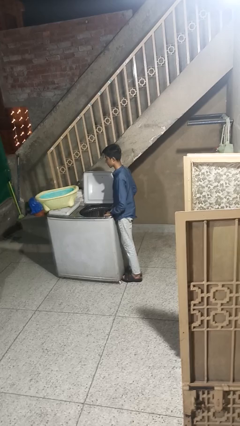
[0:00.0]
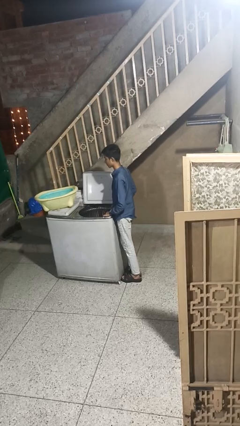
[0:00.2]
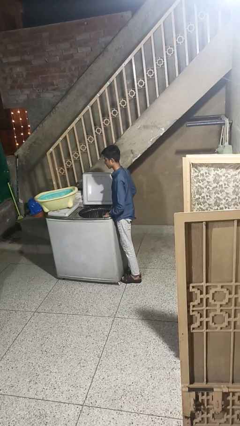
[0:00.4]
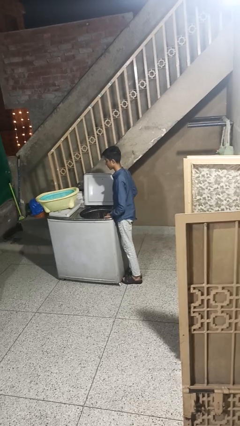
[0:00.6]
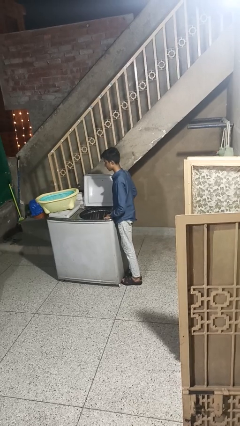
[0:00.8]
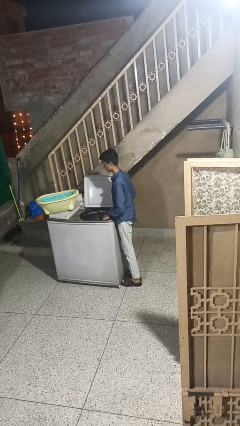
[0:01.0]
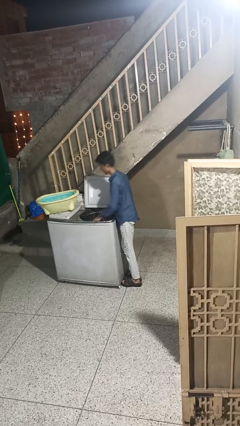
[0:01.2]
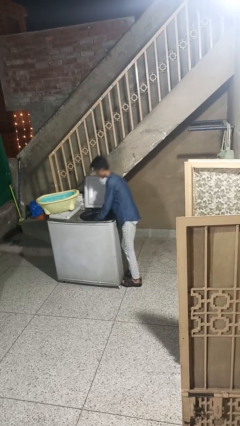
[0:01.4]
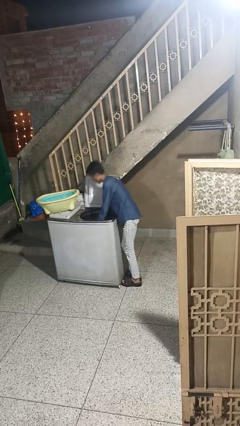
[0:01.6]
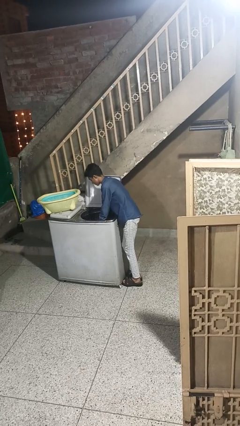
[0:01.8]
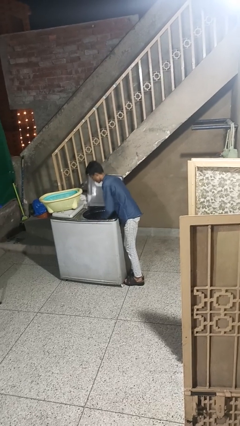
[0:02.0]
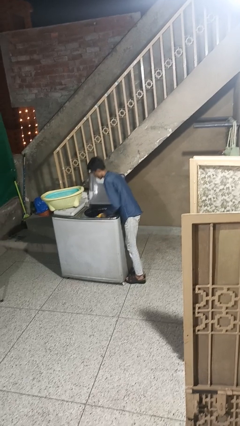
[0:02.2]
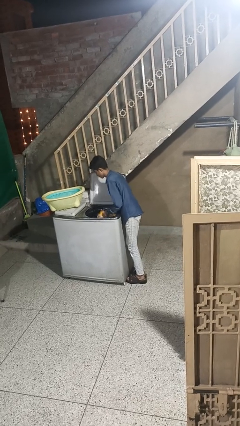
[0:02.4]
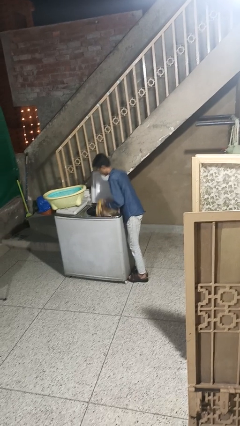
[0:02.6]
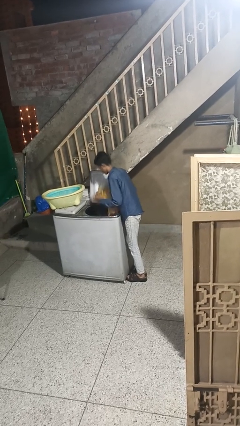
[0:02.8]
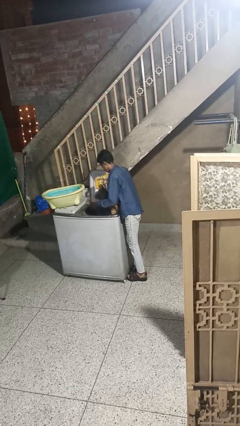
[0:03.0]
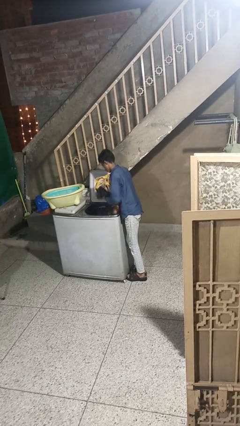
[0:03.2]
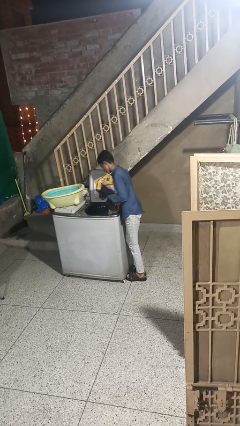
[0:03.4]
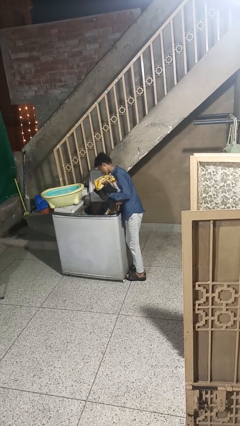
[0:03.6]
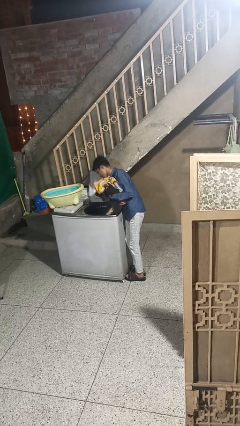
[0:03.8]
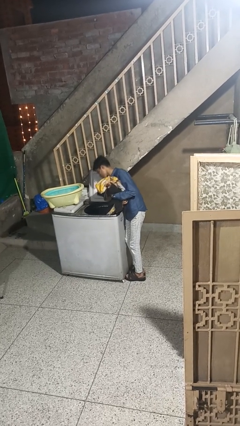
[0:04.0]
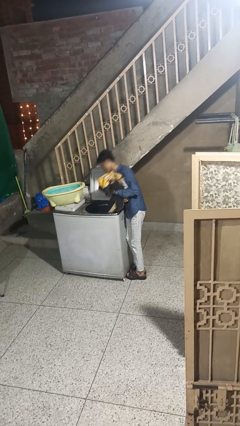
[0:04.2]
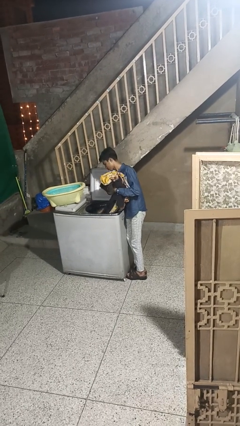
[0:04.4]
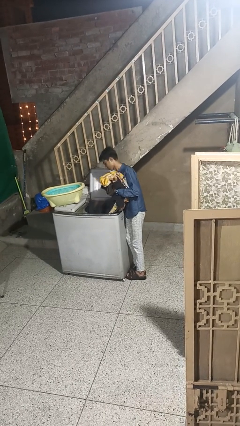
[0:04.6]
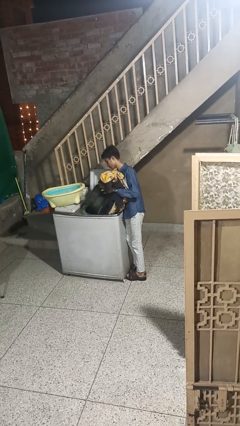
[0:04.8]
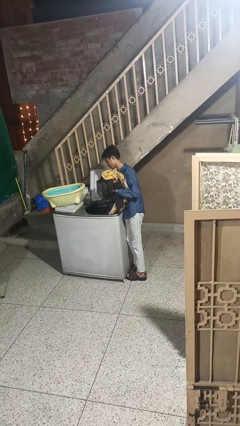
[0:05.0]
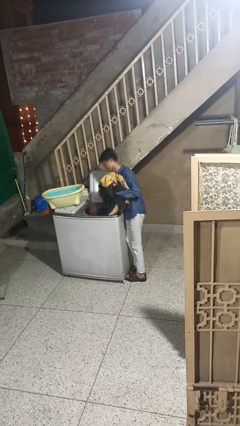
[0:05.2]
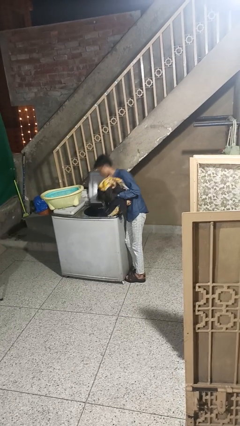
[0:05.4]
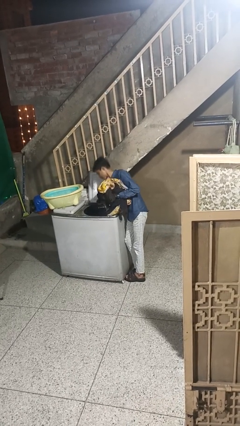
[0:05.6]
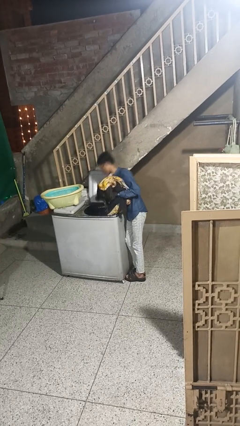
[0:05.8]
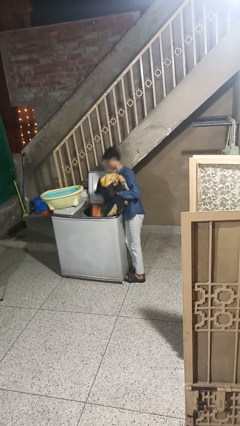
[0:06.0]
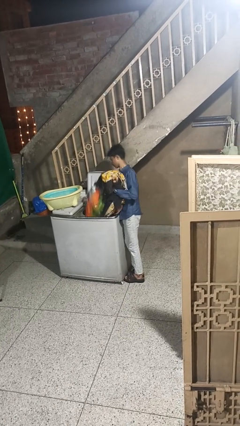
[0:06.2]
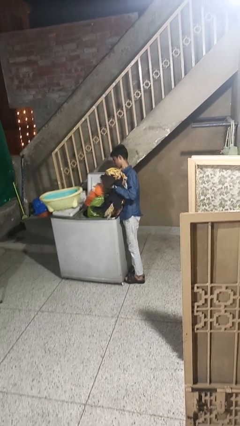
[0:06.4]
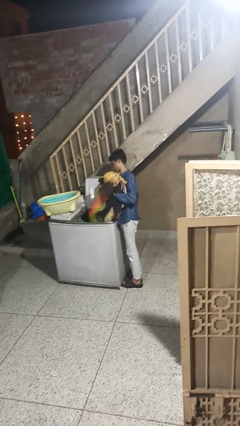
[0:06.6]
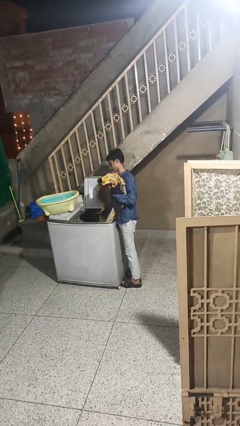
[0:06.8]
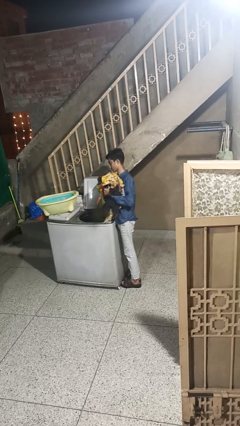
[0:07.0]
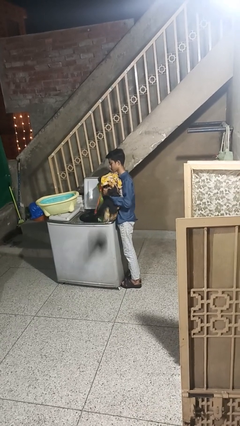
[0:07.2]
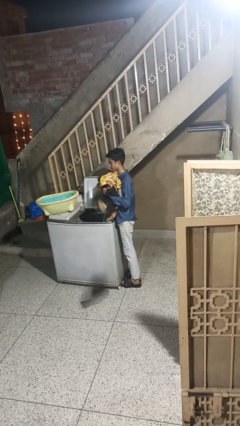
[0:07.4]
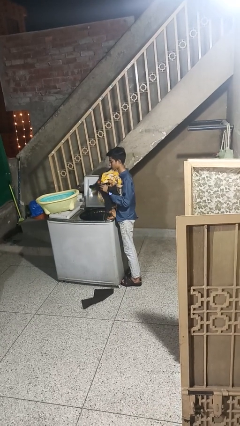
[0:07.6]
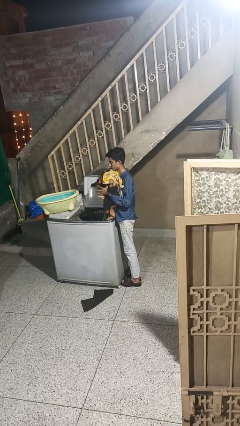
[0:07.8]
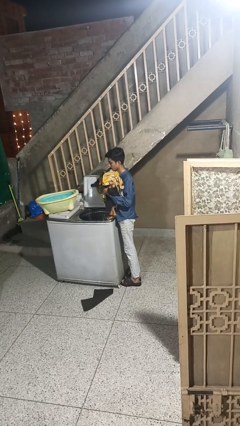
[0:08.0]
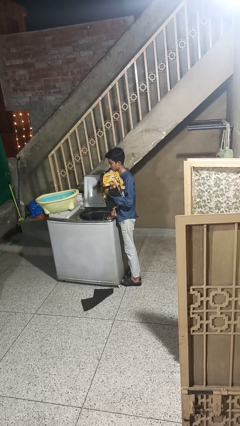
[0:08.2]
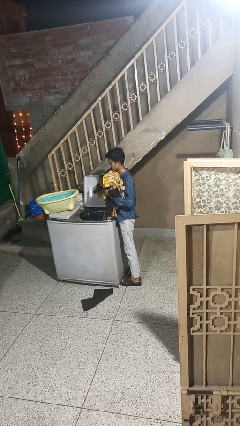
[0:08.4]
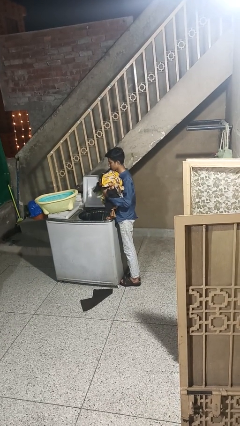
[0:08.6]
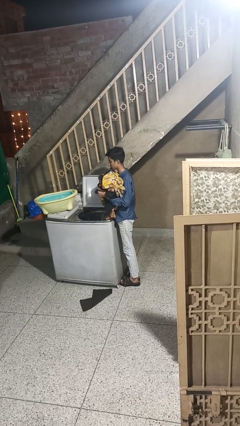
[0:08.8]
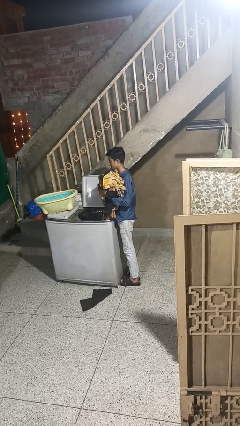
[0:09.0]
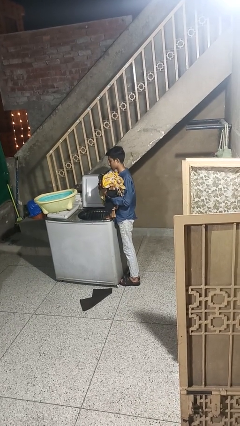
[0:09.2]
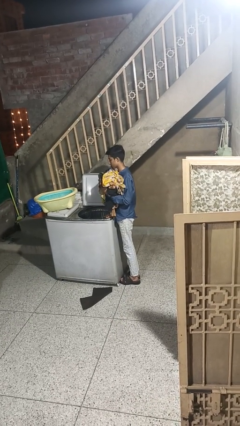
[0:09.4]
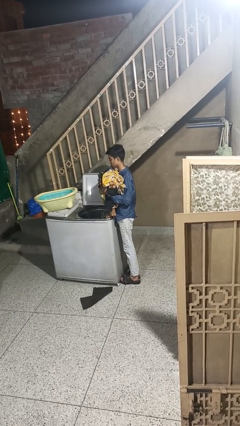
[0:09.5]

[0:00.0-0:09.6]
person loads clotheswasher

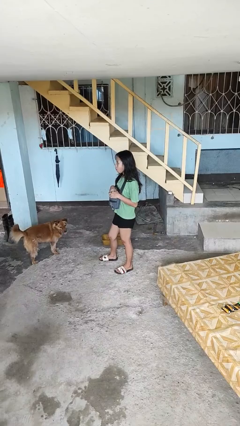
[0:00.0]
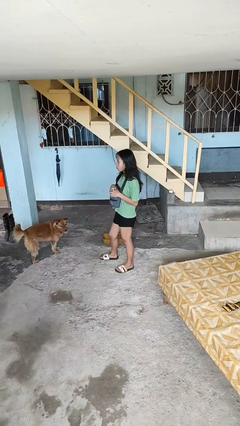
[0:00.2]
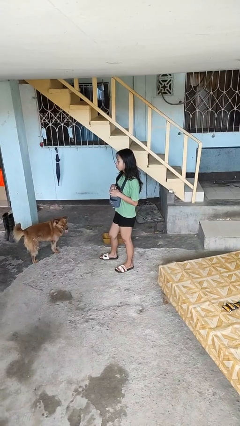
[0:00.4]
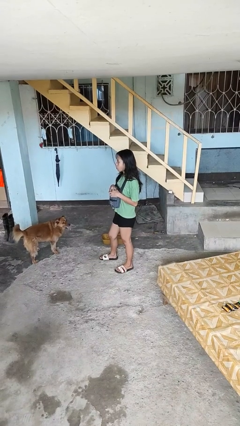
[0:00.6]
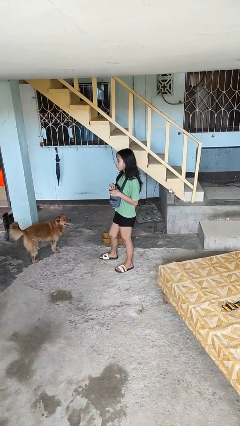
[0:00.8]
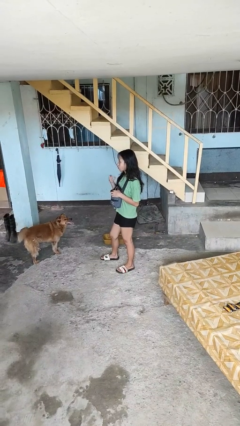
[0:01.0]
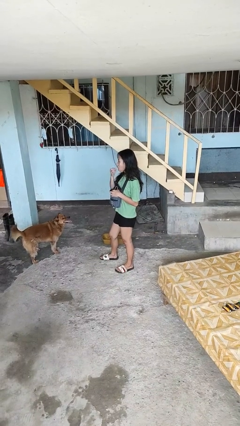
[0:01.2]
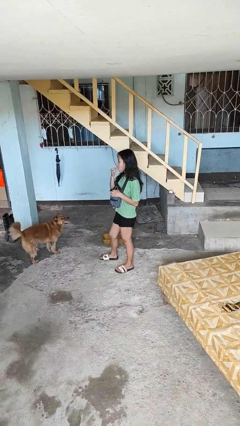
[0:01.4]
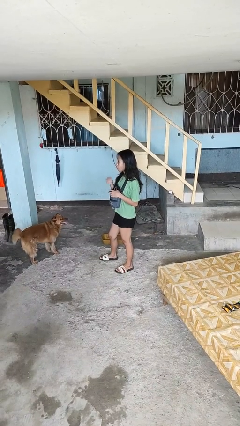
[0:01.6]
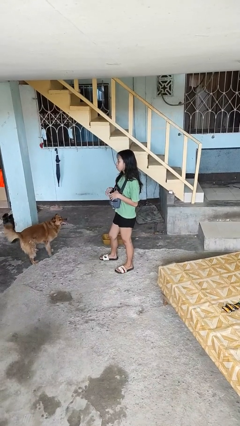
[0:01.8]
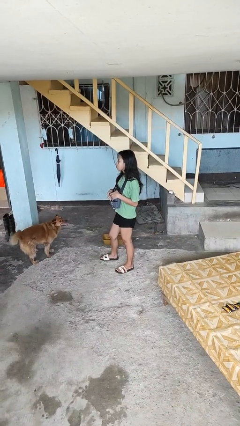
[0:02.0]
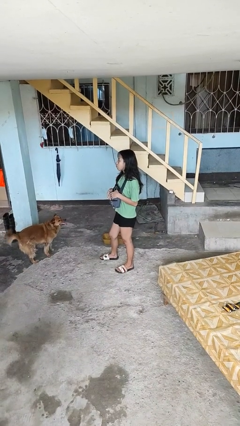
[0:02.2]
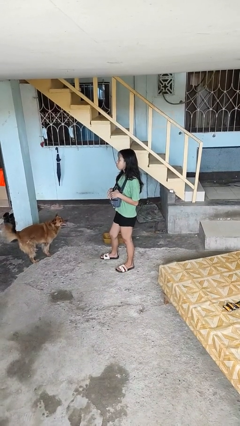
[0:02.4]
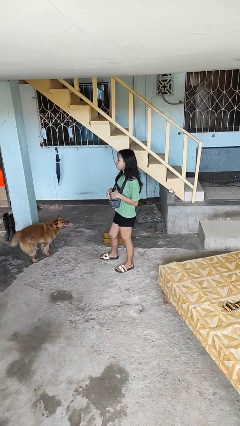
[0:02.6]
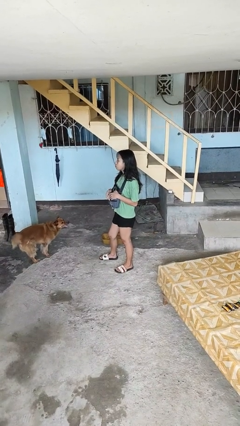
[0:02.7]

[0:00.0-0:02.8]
person eats snack from bag

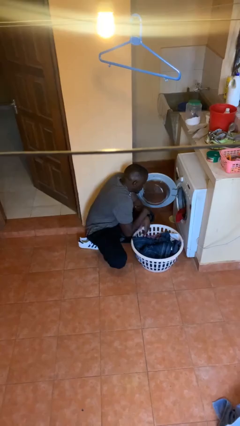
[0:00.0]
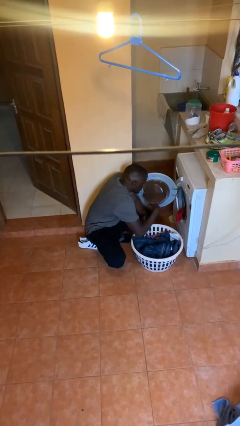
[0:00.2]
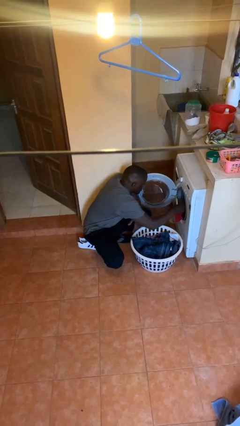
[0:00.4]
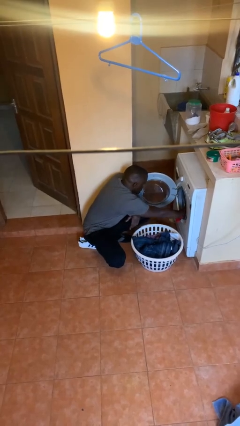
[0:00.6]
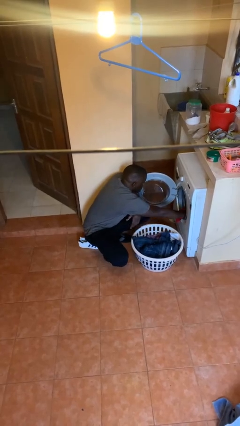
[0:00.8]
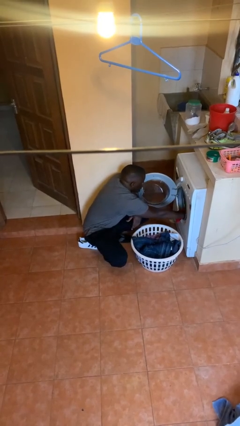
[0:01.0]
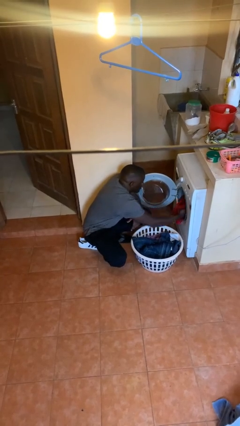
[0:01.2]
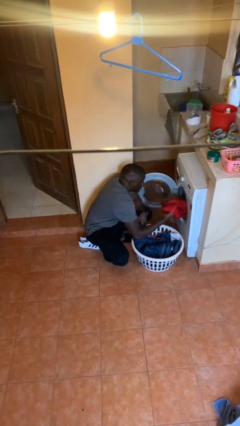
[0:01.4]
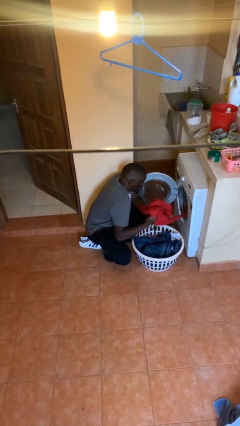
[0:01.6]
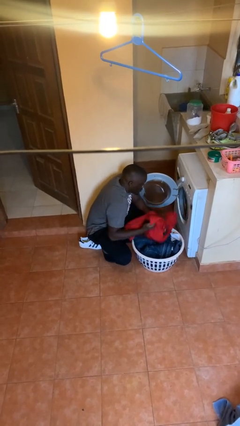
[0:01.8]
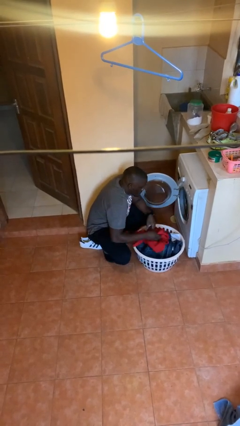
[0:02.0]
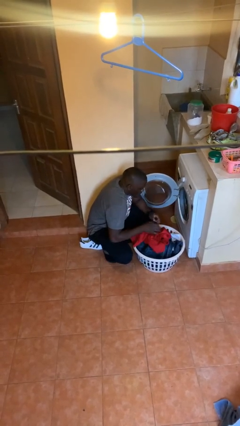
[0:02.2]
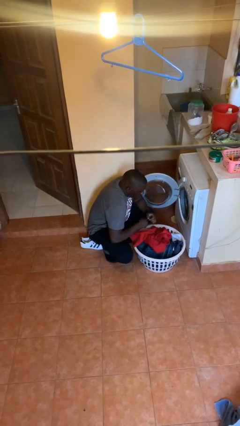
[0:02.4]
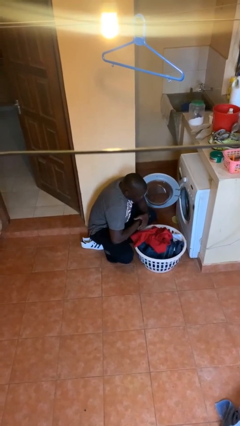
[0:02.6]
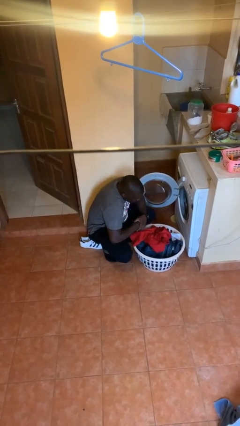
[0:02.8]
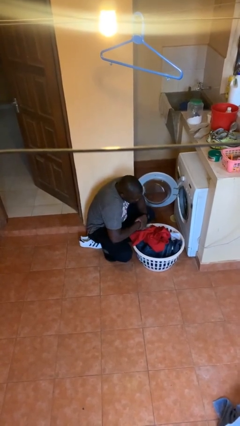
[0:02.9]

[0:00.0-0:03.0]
person unloads dryer

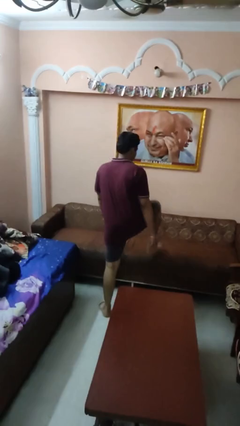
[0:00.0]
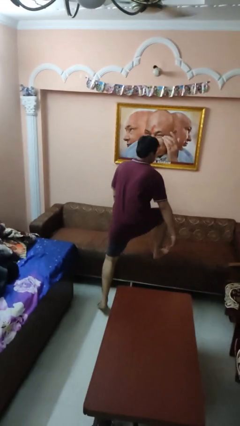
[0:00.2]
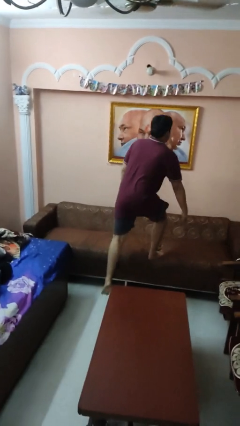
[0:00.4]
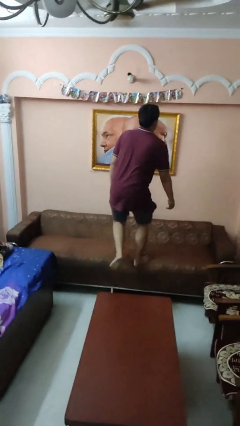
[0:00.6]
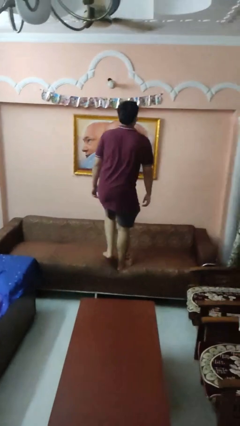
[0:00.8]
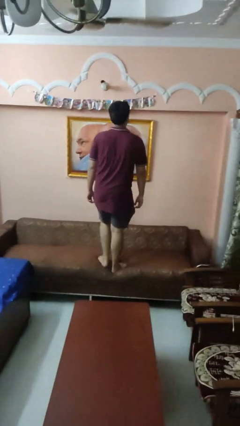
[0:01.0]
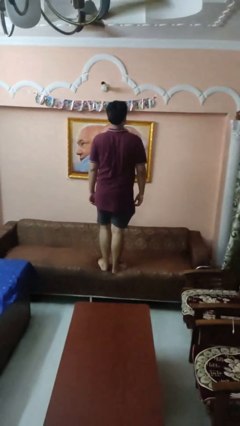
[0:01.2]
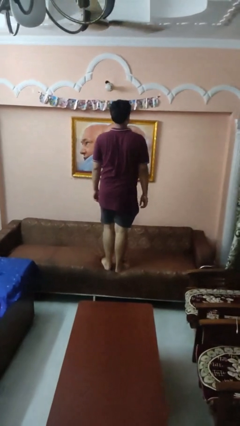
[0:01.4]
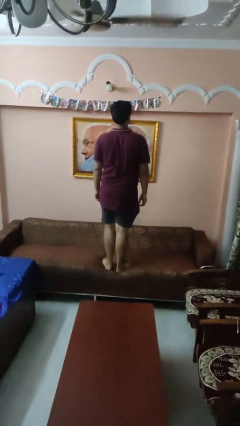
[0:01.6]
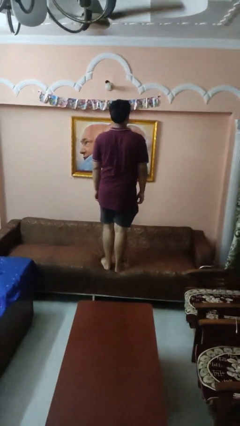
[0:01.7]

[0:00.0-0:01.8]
person climbs on couch

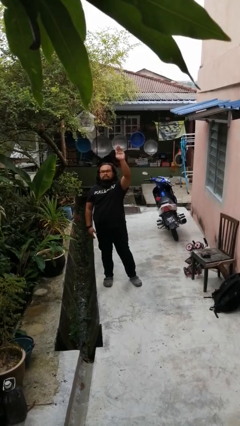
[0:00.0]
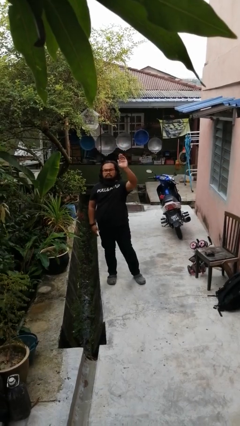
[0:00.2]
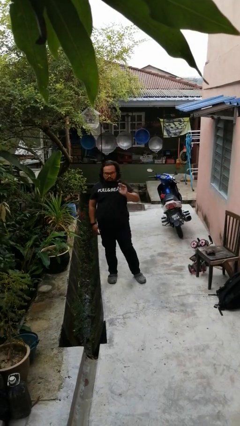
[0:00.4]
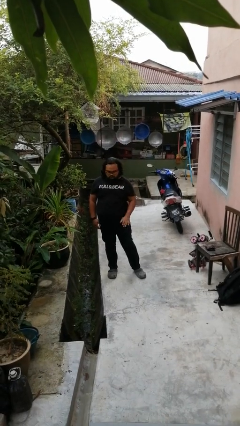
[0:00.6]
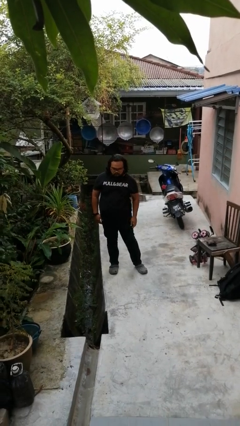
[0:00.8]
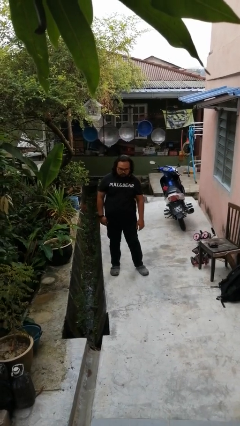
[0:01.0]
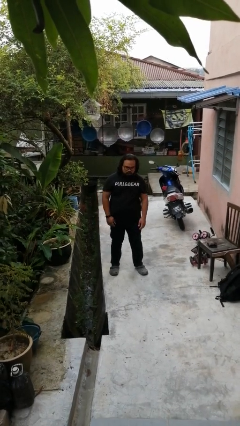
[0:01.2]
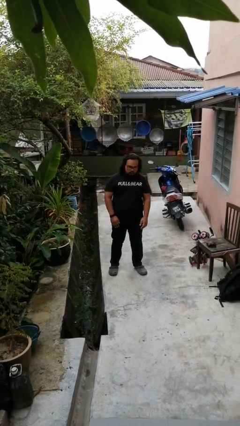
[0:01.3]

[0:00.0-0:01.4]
person gestures lower hand
